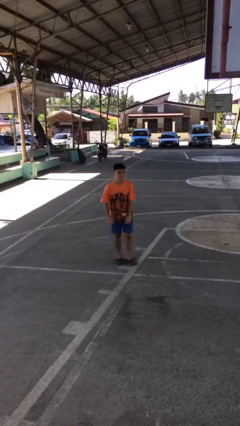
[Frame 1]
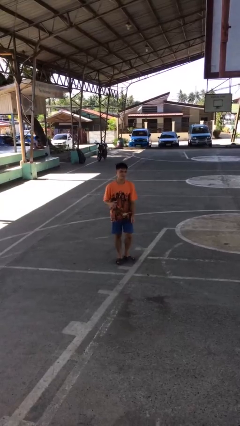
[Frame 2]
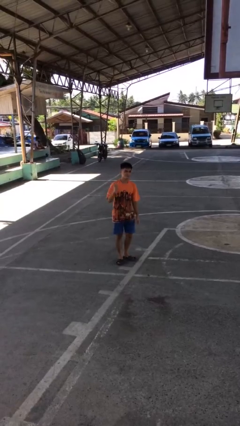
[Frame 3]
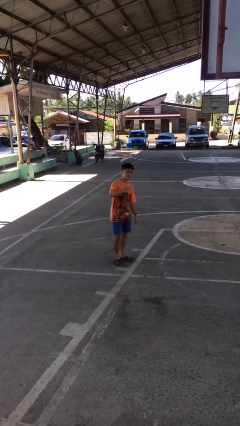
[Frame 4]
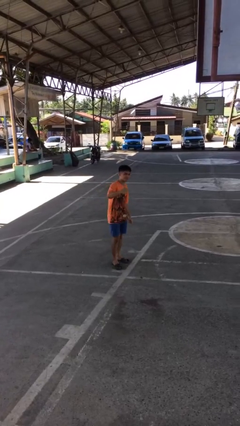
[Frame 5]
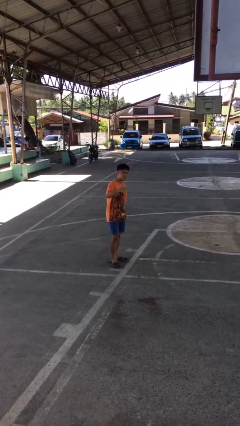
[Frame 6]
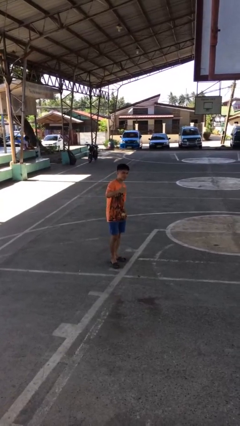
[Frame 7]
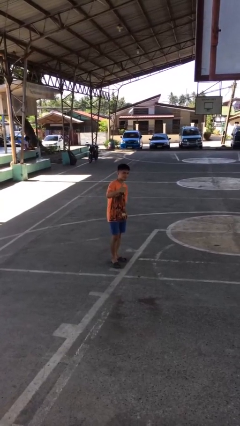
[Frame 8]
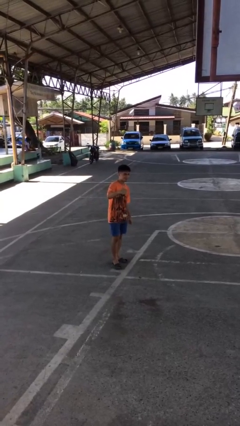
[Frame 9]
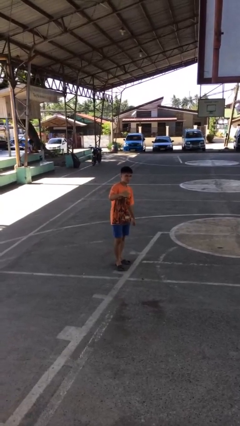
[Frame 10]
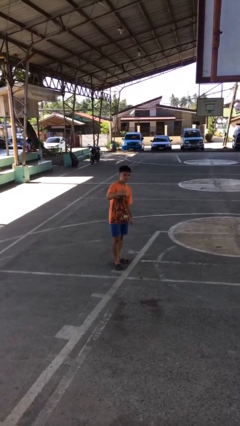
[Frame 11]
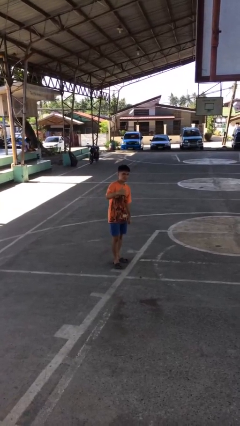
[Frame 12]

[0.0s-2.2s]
person gestures thumbs up

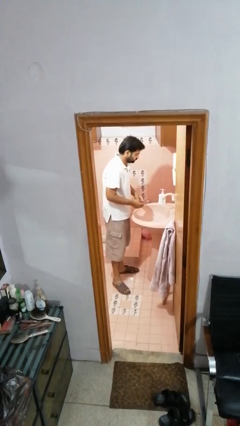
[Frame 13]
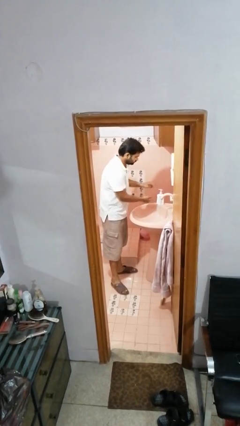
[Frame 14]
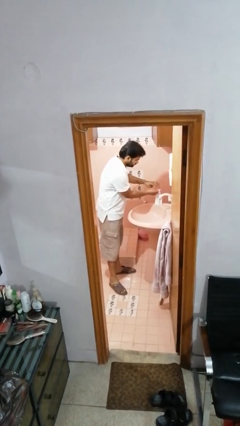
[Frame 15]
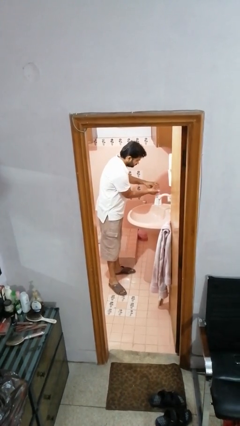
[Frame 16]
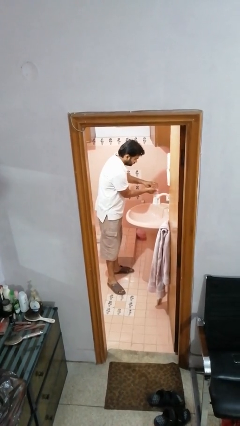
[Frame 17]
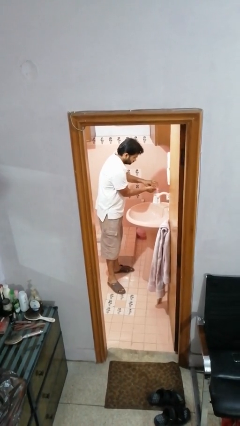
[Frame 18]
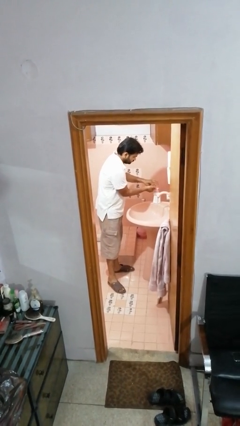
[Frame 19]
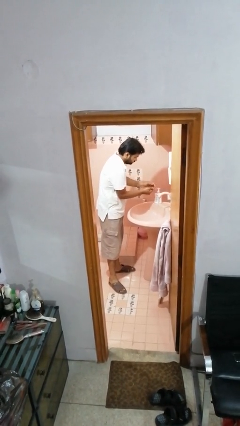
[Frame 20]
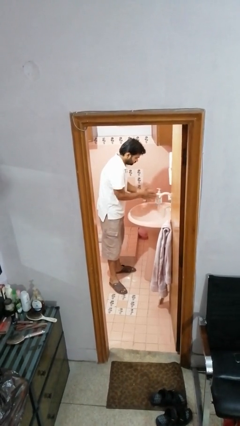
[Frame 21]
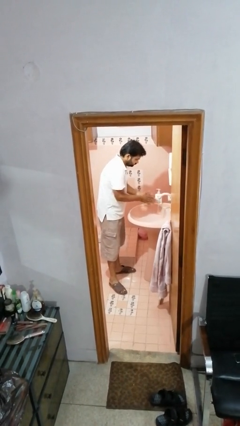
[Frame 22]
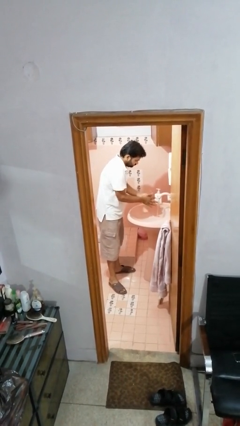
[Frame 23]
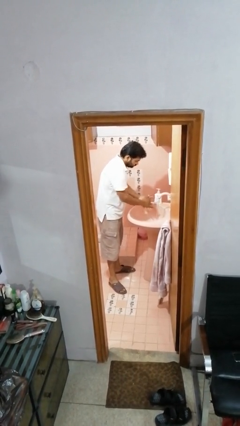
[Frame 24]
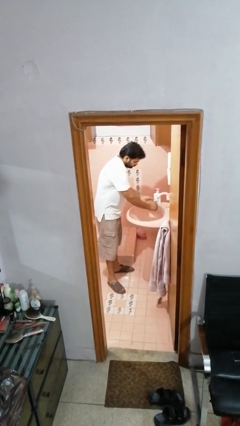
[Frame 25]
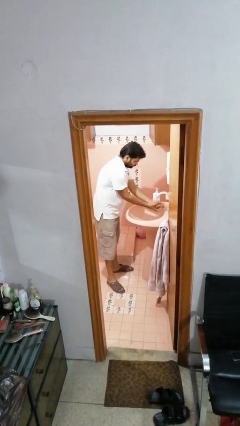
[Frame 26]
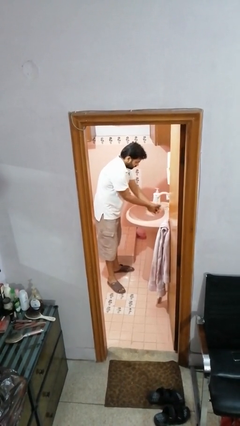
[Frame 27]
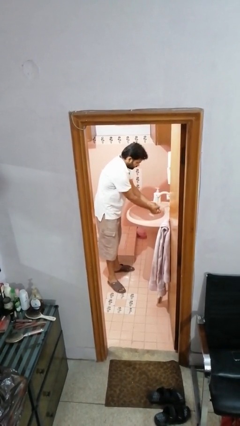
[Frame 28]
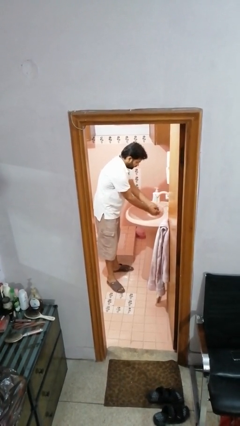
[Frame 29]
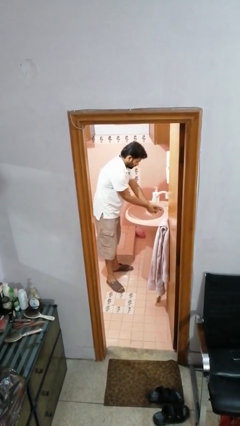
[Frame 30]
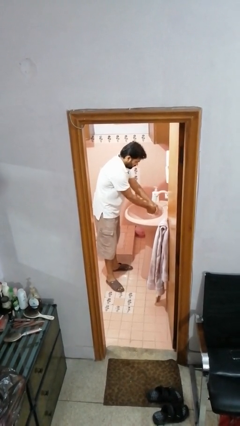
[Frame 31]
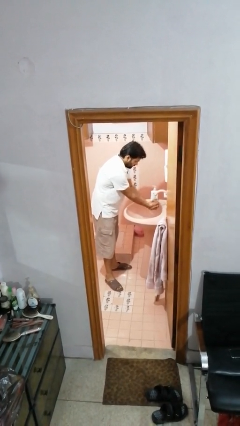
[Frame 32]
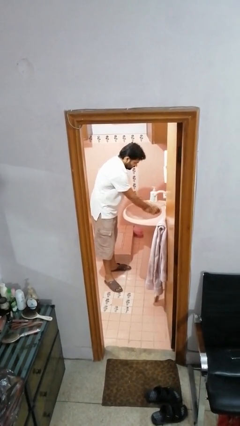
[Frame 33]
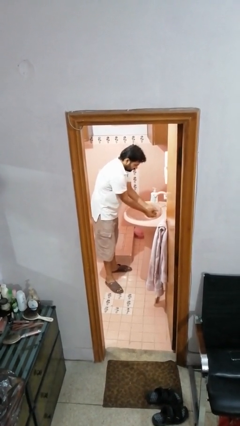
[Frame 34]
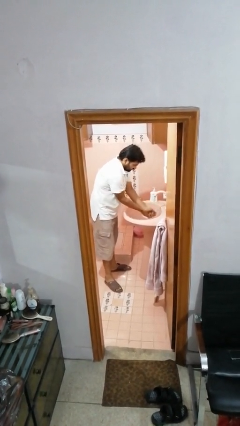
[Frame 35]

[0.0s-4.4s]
person washes hands

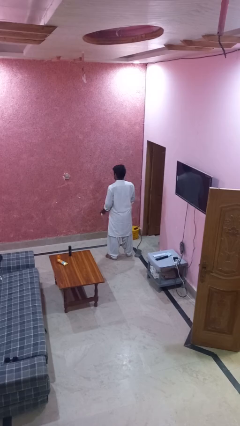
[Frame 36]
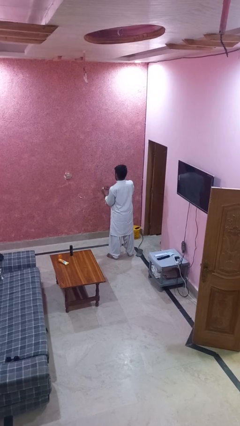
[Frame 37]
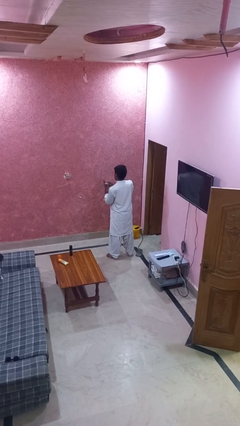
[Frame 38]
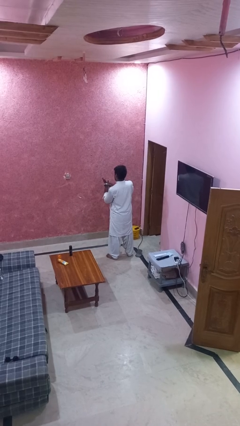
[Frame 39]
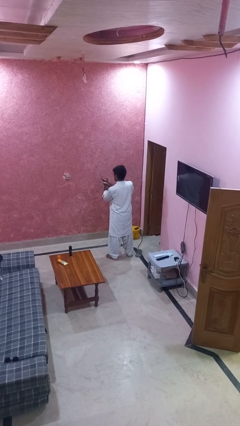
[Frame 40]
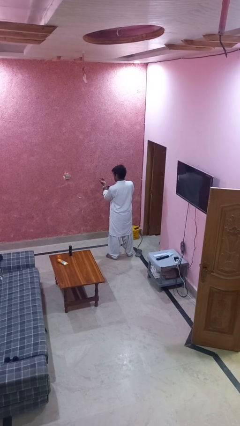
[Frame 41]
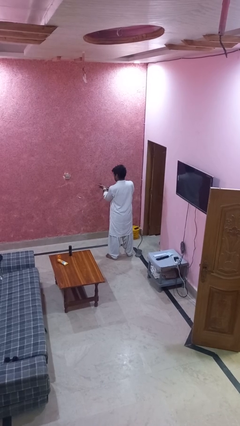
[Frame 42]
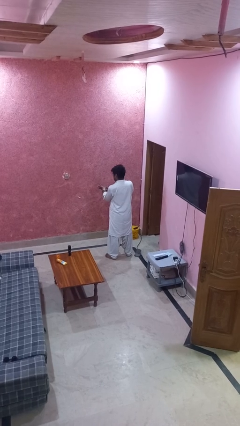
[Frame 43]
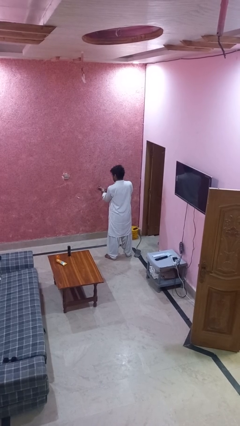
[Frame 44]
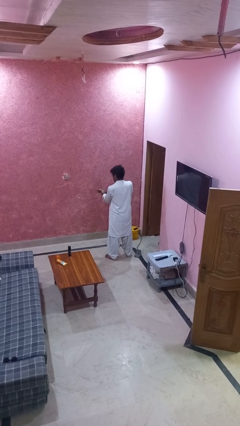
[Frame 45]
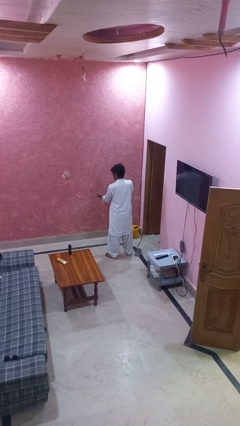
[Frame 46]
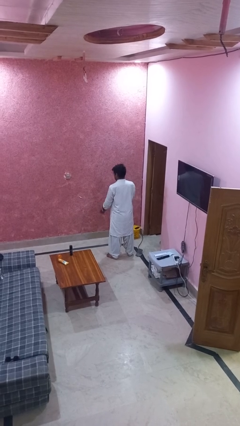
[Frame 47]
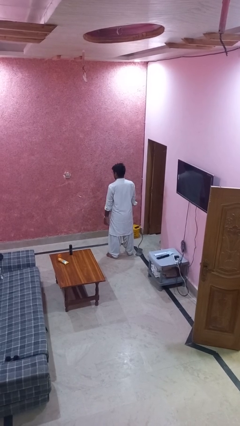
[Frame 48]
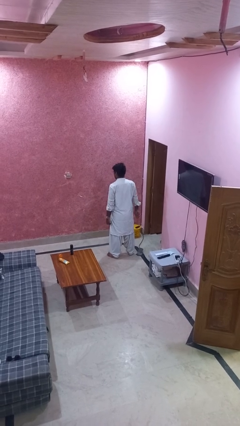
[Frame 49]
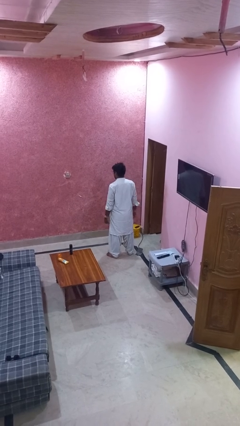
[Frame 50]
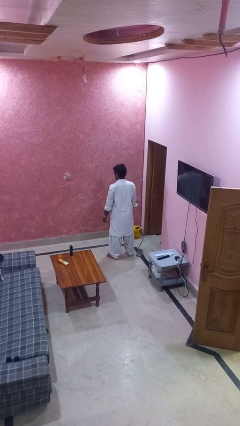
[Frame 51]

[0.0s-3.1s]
person puts on wristwatch

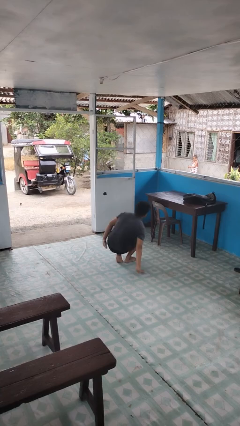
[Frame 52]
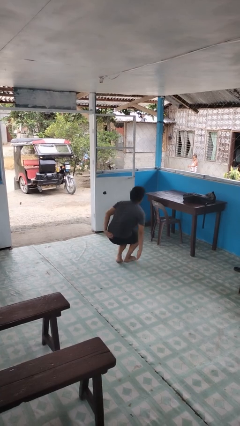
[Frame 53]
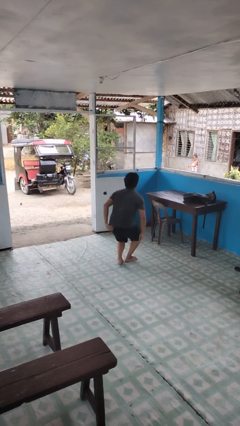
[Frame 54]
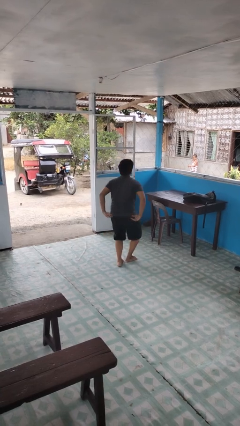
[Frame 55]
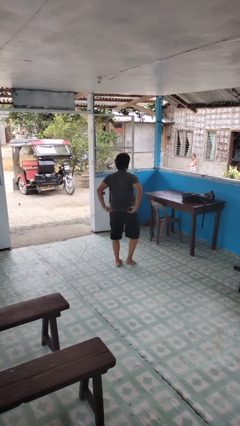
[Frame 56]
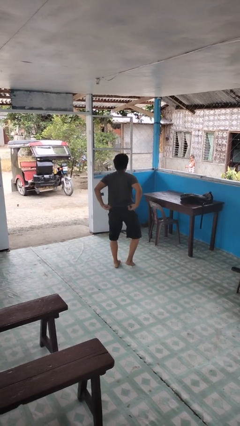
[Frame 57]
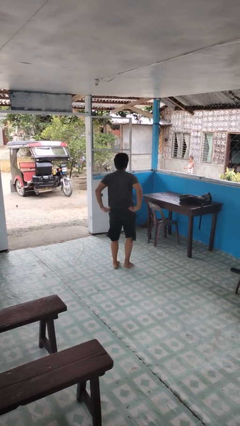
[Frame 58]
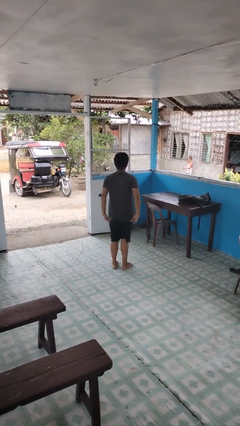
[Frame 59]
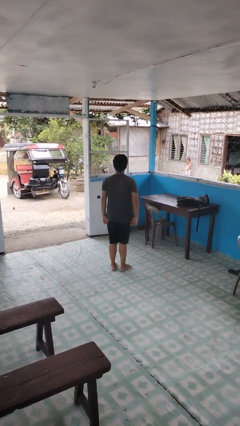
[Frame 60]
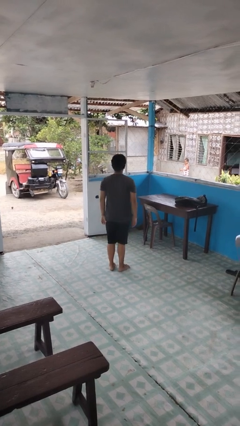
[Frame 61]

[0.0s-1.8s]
person stands up from floor

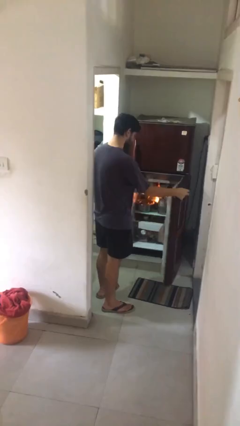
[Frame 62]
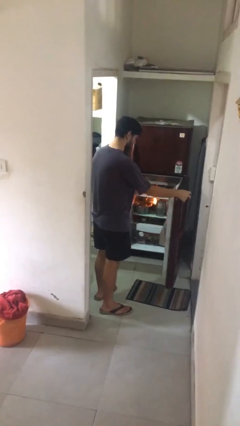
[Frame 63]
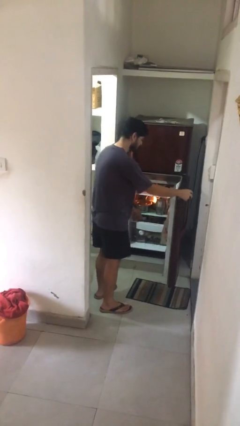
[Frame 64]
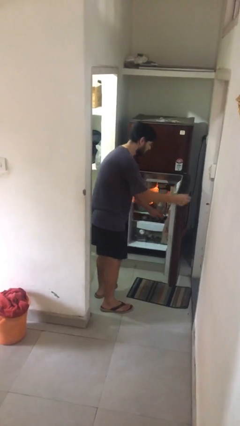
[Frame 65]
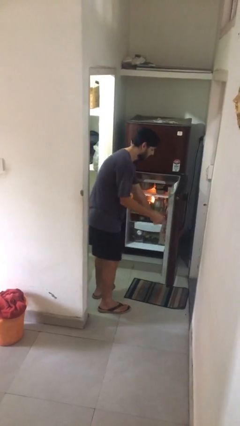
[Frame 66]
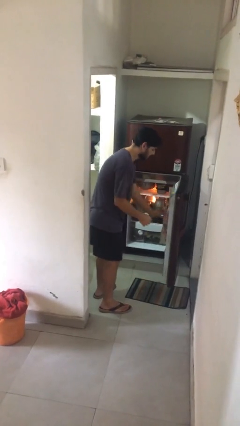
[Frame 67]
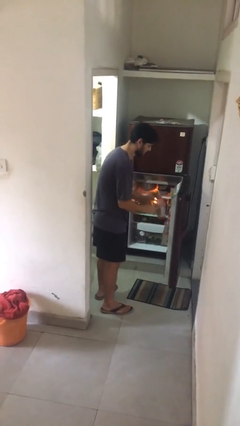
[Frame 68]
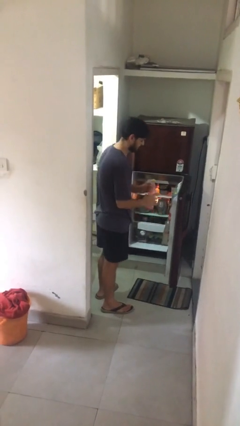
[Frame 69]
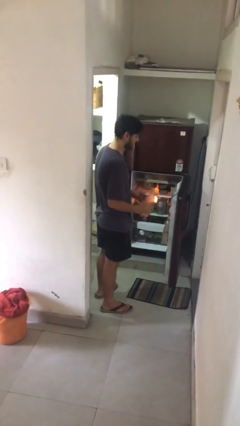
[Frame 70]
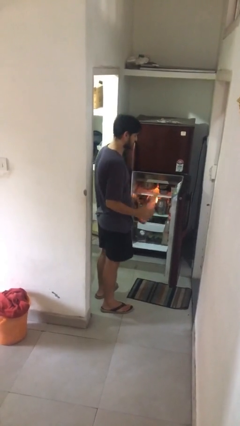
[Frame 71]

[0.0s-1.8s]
person takes object from refrigerator

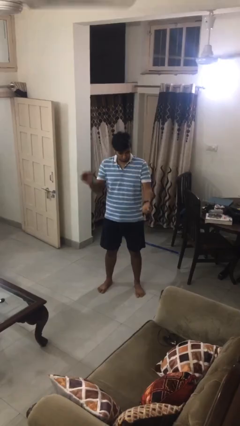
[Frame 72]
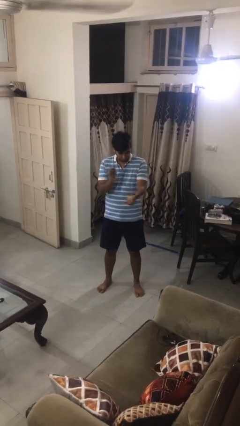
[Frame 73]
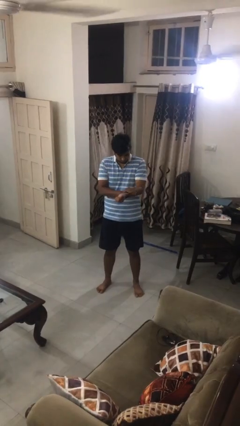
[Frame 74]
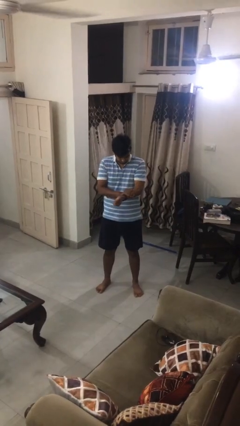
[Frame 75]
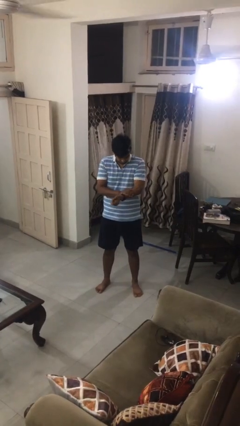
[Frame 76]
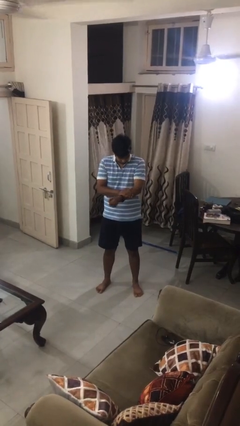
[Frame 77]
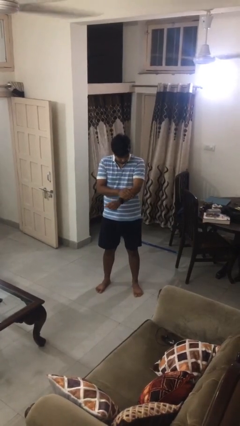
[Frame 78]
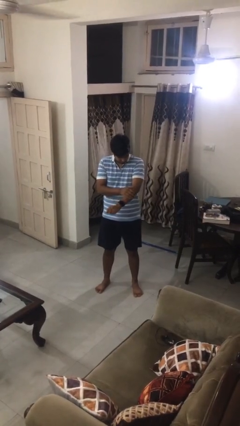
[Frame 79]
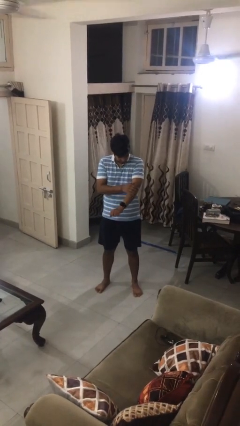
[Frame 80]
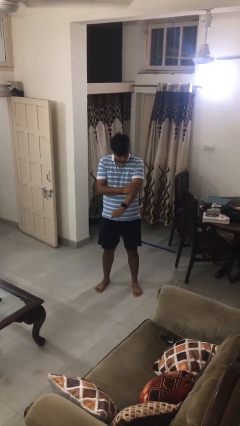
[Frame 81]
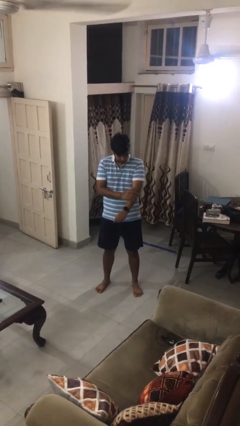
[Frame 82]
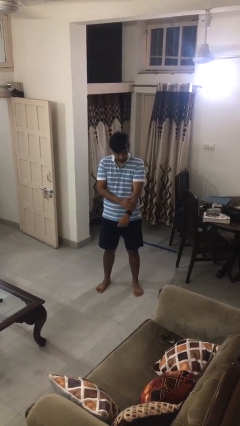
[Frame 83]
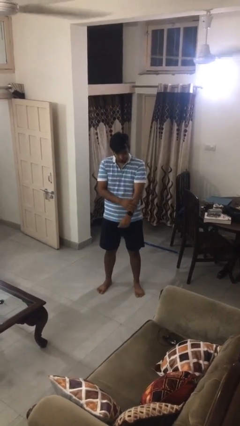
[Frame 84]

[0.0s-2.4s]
person swats bug

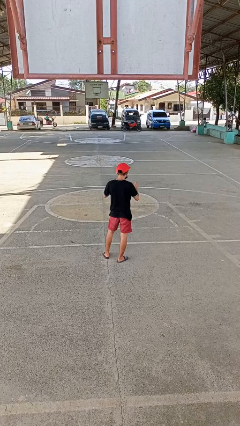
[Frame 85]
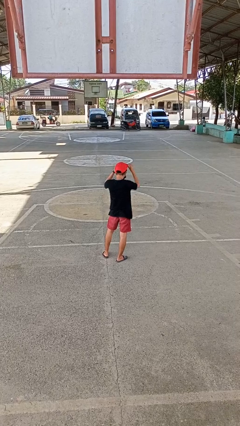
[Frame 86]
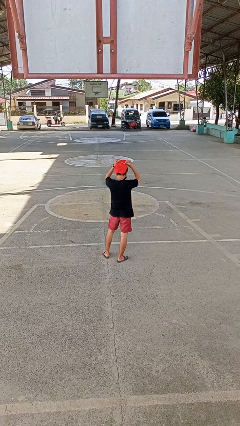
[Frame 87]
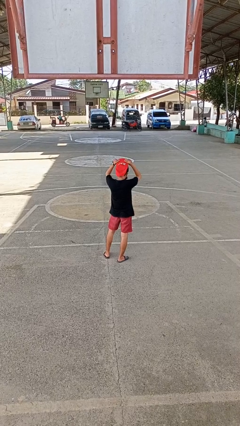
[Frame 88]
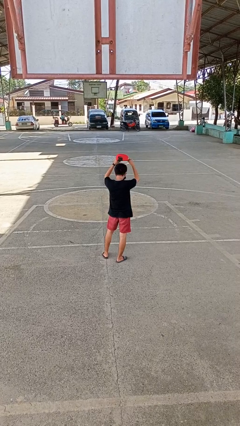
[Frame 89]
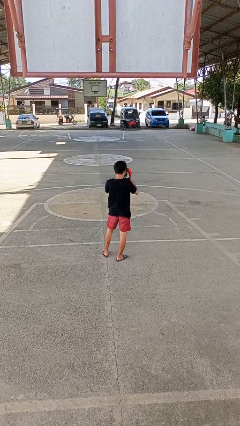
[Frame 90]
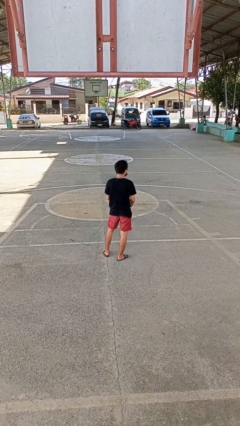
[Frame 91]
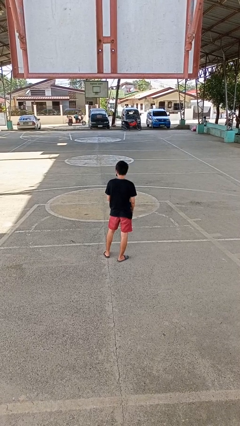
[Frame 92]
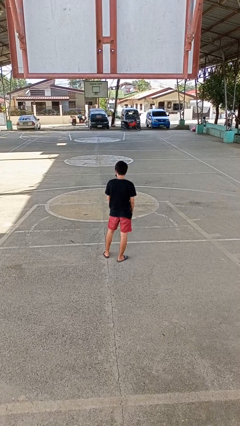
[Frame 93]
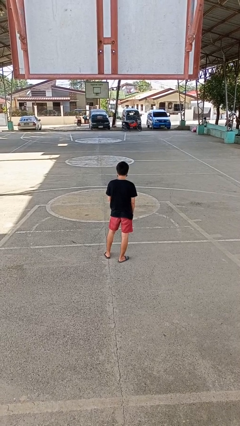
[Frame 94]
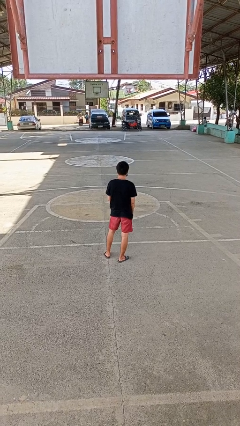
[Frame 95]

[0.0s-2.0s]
person takes off hat
